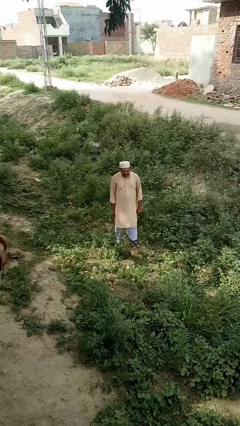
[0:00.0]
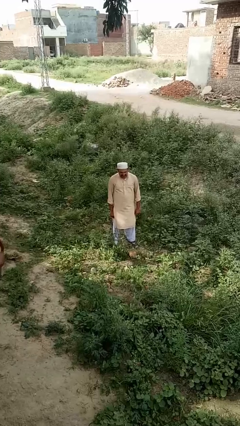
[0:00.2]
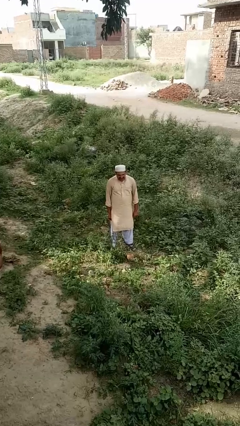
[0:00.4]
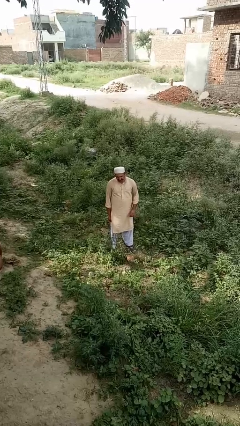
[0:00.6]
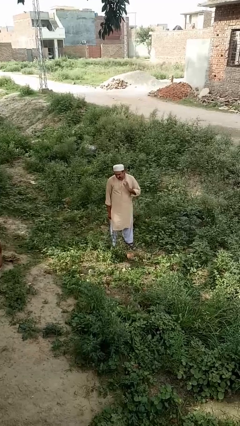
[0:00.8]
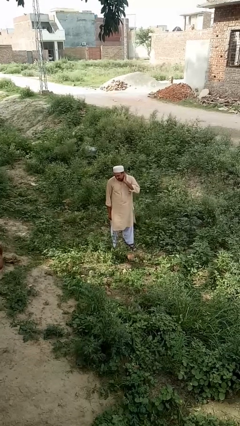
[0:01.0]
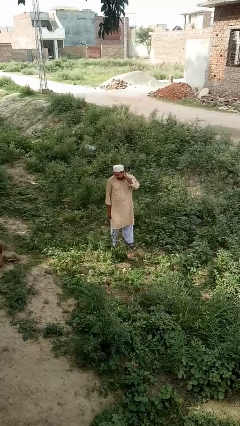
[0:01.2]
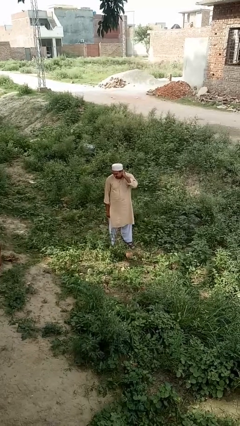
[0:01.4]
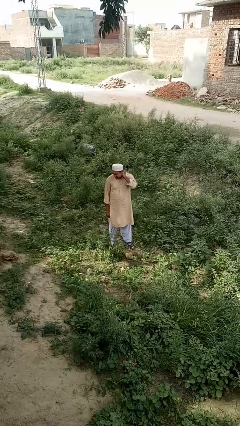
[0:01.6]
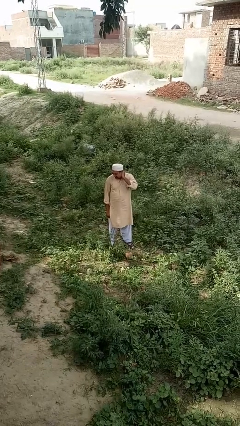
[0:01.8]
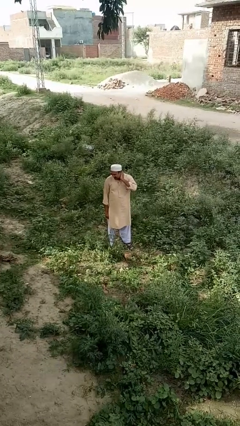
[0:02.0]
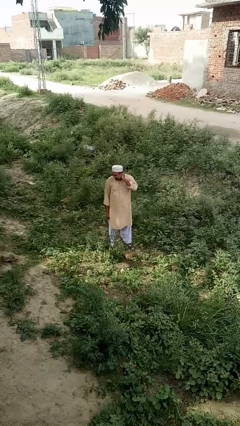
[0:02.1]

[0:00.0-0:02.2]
person rubs neck

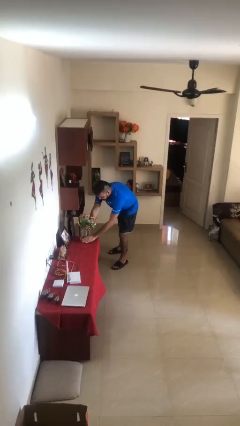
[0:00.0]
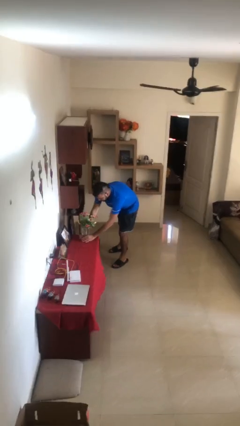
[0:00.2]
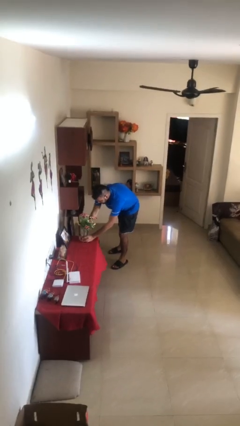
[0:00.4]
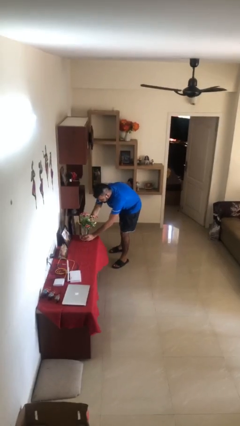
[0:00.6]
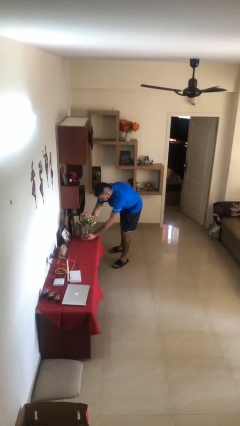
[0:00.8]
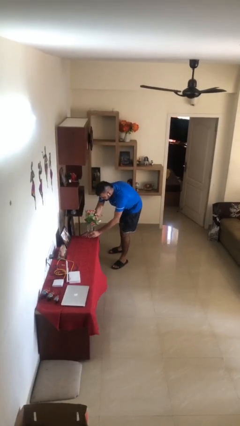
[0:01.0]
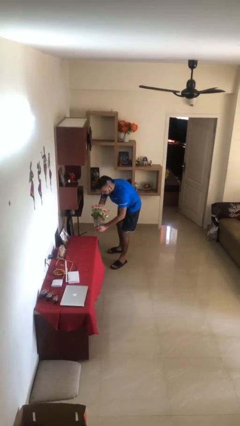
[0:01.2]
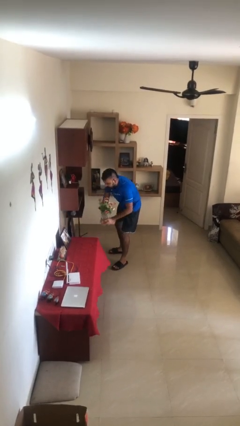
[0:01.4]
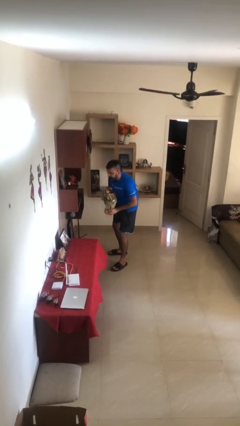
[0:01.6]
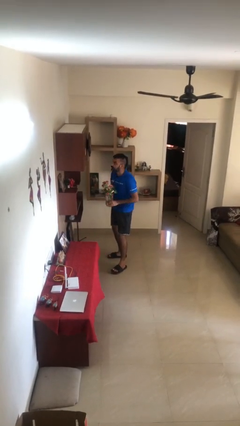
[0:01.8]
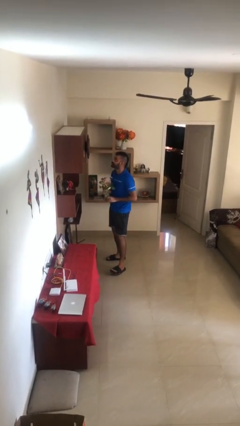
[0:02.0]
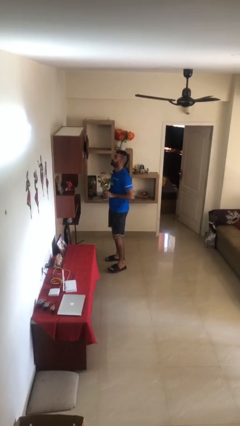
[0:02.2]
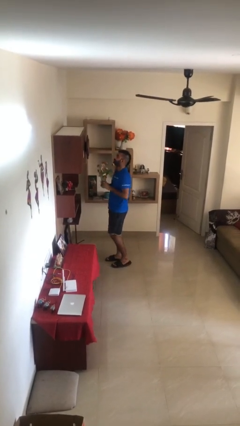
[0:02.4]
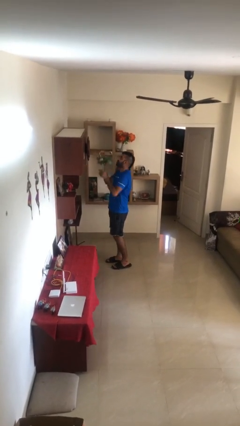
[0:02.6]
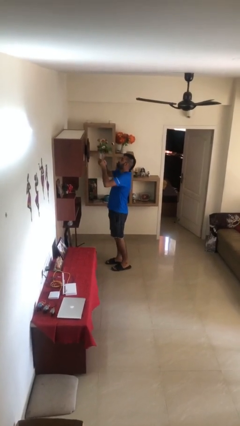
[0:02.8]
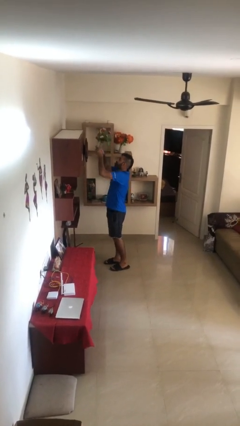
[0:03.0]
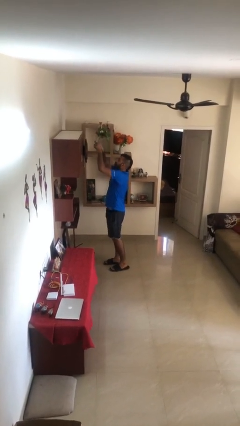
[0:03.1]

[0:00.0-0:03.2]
person picks up object from table

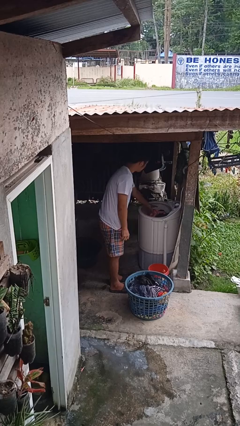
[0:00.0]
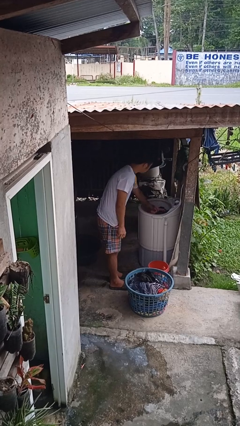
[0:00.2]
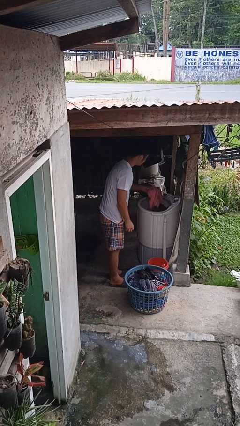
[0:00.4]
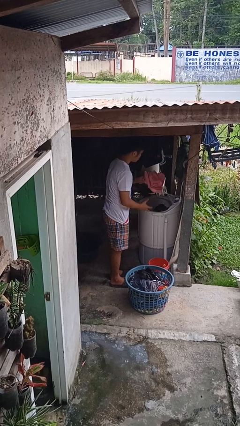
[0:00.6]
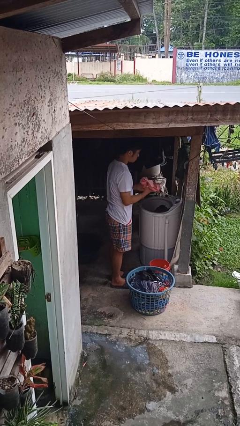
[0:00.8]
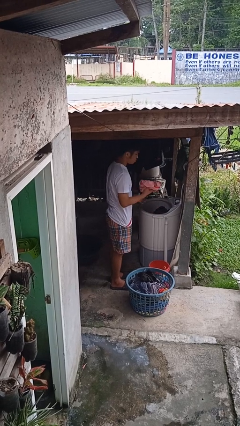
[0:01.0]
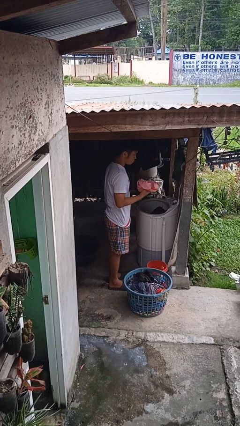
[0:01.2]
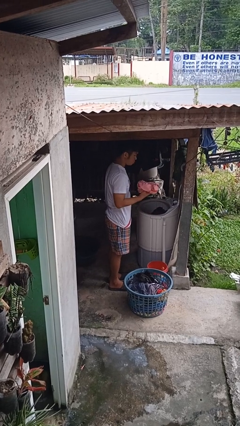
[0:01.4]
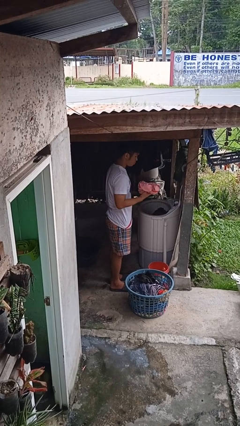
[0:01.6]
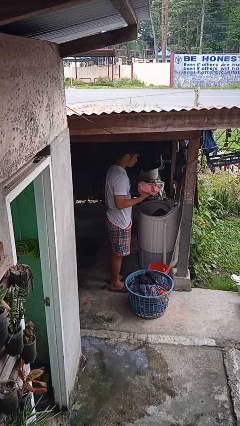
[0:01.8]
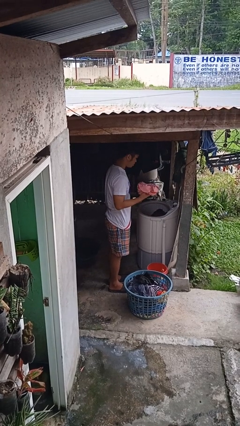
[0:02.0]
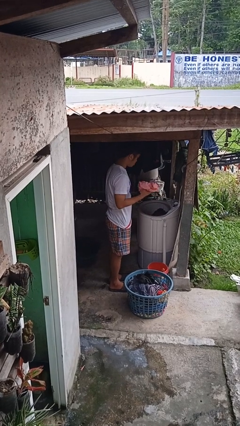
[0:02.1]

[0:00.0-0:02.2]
person unloads clotheswasher

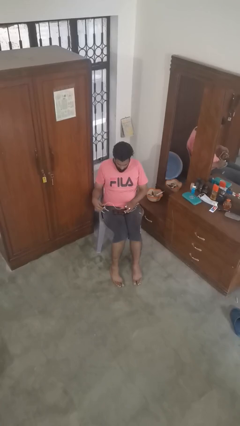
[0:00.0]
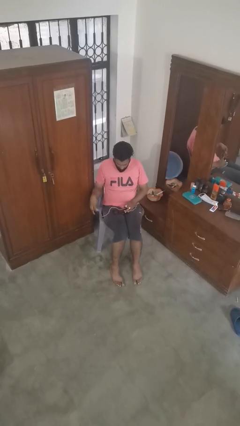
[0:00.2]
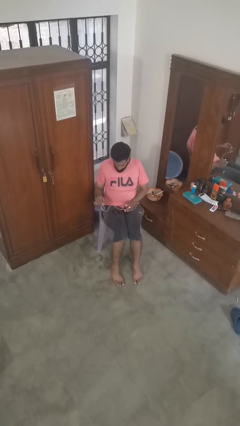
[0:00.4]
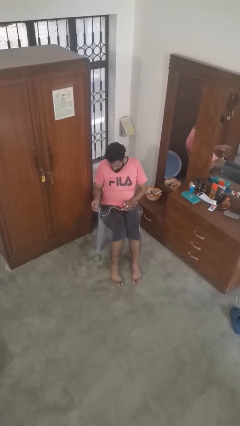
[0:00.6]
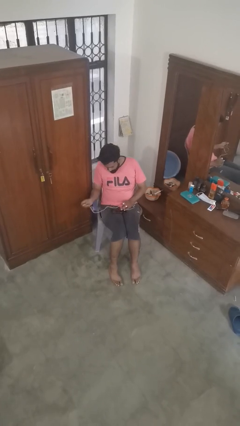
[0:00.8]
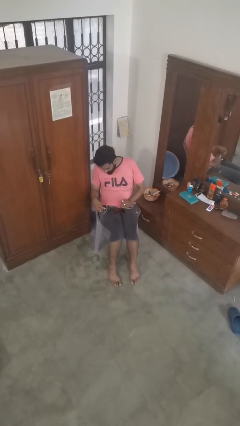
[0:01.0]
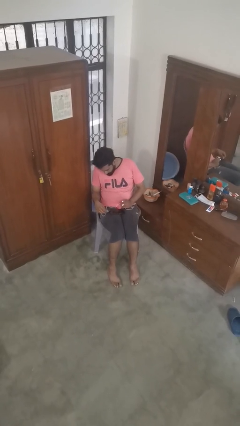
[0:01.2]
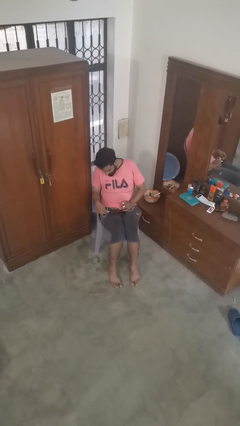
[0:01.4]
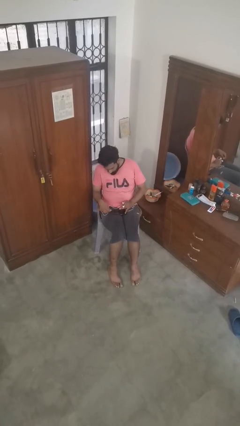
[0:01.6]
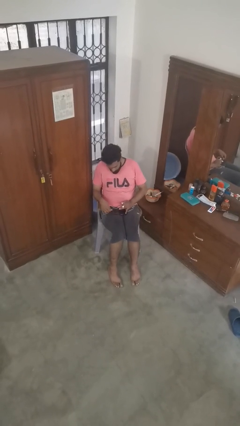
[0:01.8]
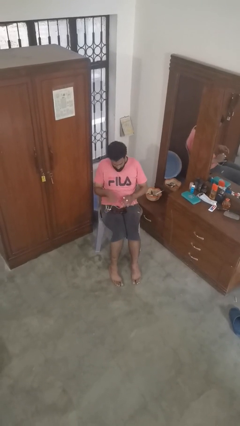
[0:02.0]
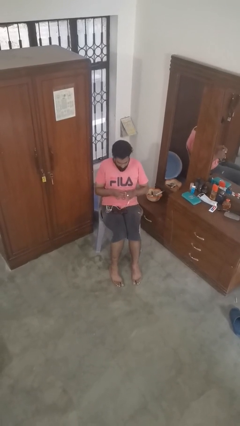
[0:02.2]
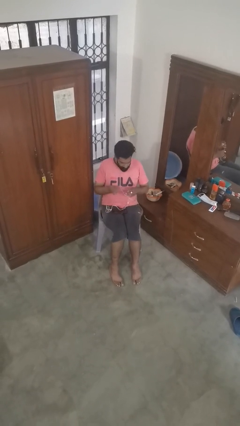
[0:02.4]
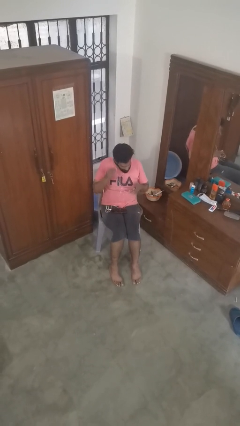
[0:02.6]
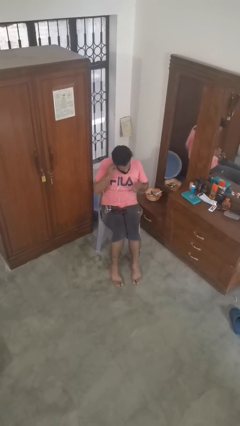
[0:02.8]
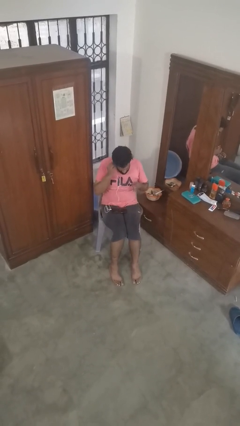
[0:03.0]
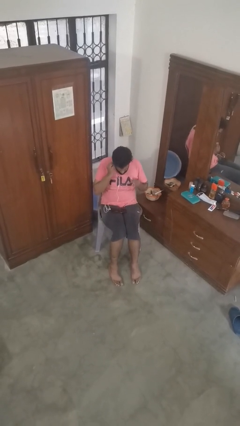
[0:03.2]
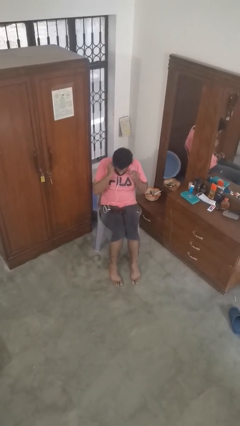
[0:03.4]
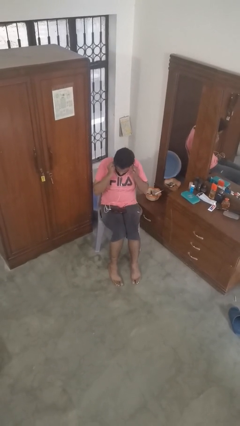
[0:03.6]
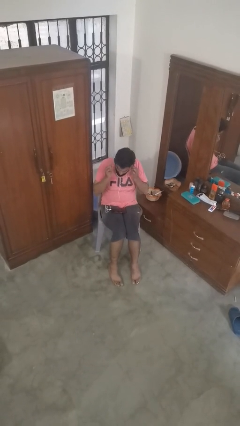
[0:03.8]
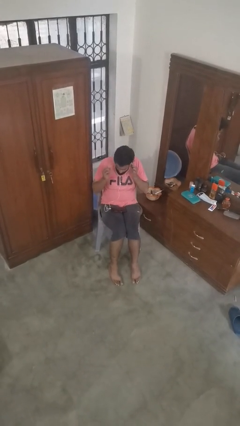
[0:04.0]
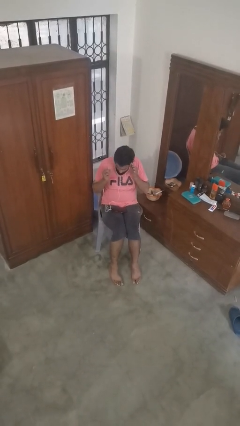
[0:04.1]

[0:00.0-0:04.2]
person puts on headphones

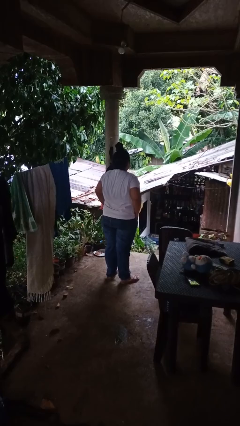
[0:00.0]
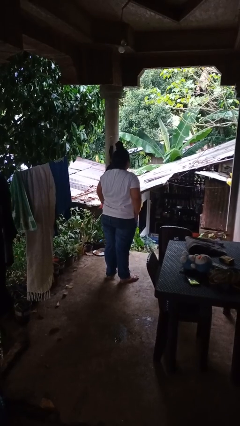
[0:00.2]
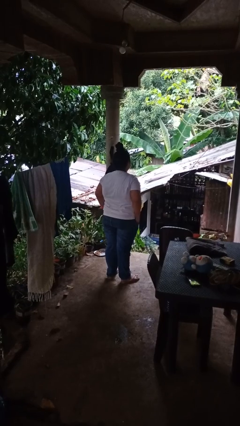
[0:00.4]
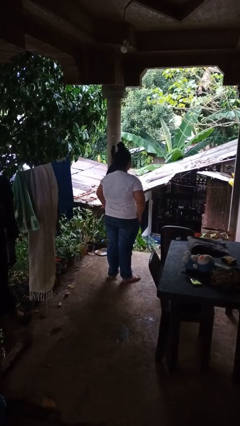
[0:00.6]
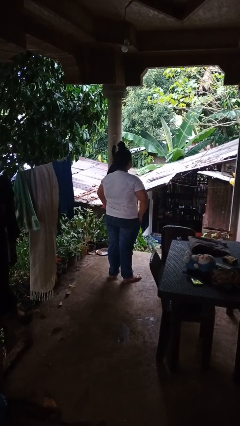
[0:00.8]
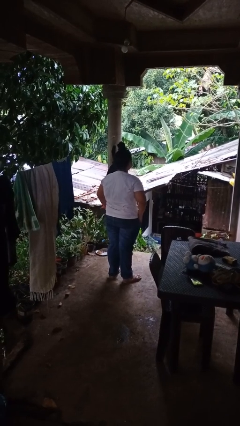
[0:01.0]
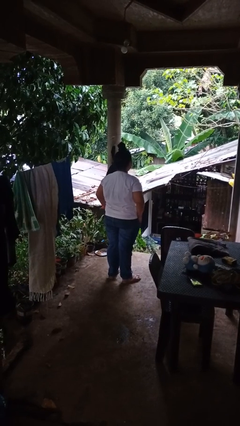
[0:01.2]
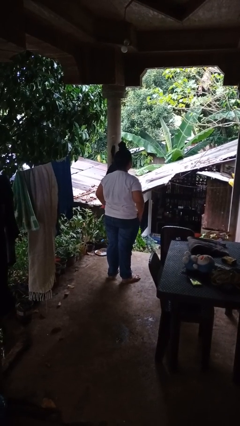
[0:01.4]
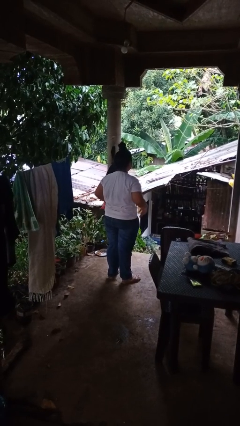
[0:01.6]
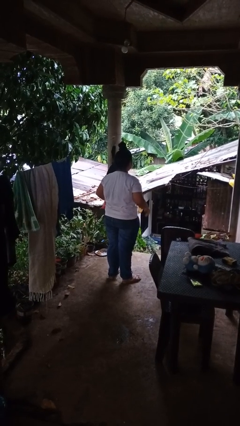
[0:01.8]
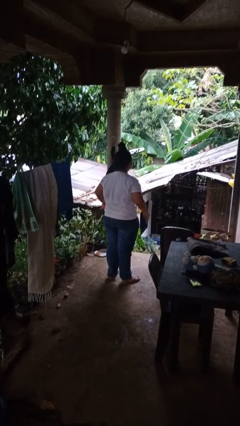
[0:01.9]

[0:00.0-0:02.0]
person puts hands in back pockets

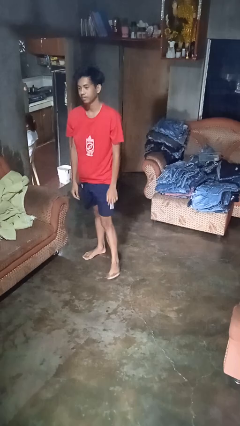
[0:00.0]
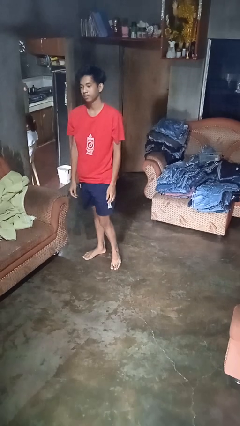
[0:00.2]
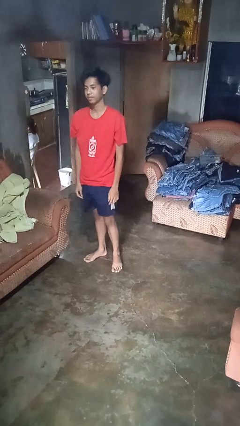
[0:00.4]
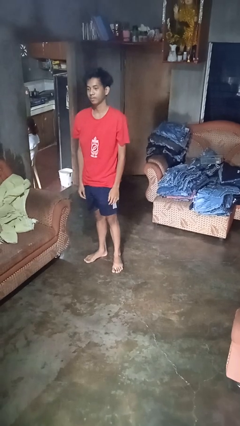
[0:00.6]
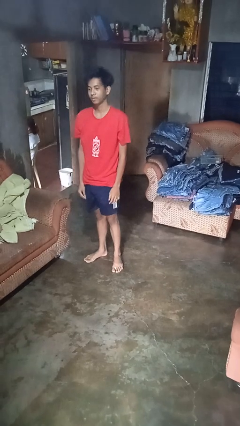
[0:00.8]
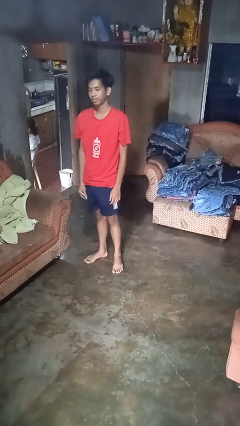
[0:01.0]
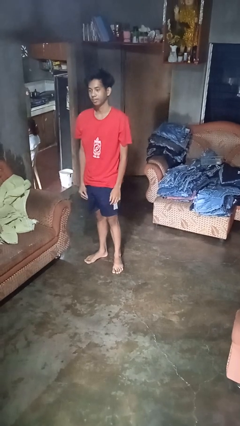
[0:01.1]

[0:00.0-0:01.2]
person stands up from floor

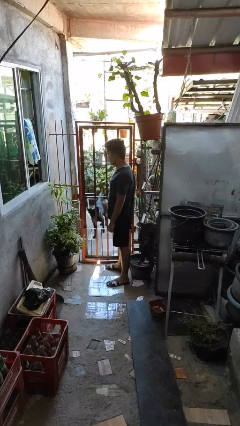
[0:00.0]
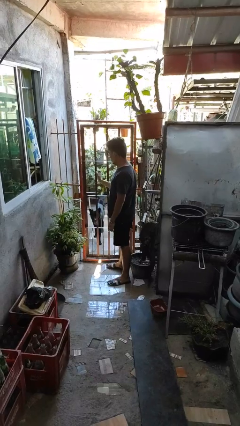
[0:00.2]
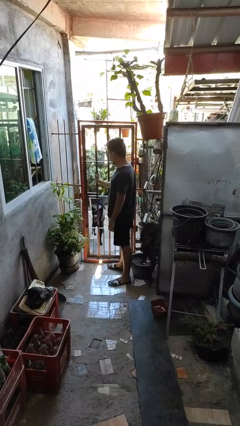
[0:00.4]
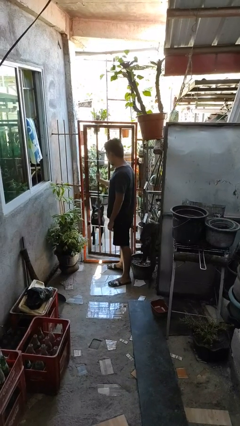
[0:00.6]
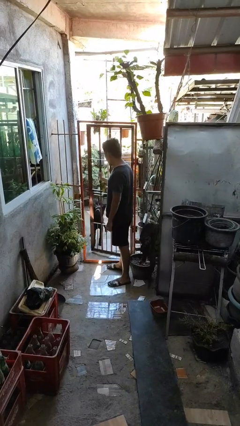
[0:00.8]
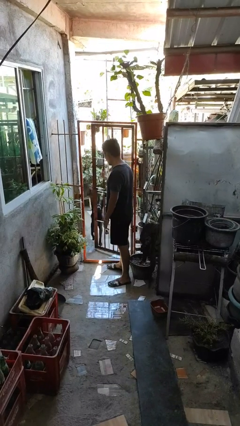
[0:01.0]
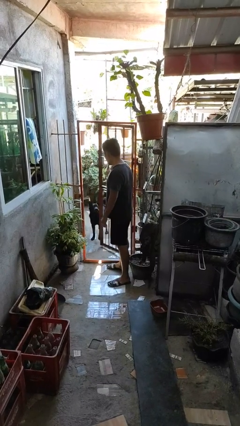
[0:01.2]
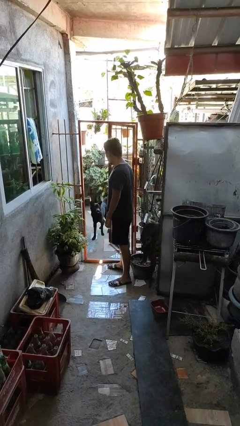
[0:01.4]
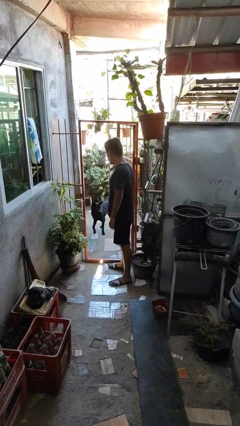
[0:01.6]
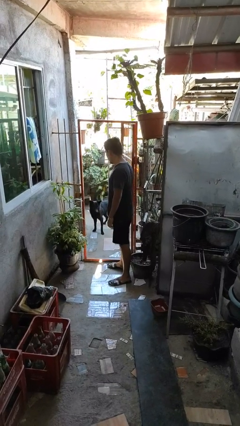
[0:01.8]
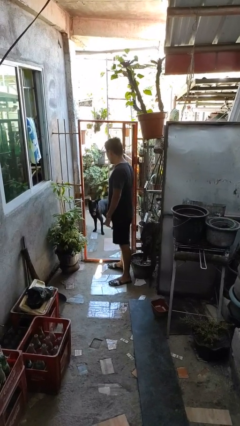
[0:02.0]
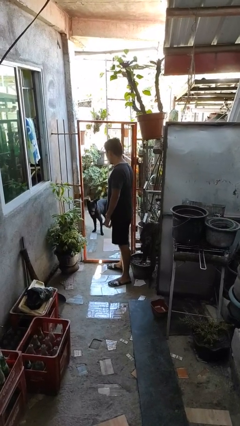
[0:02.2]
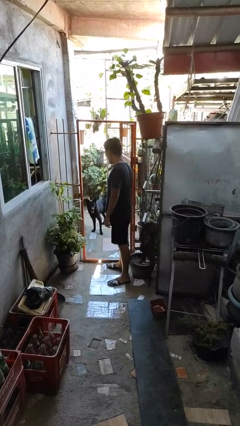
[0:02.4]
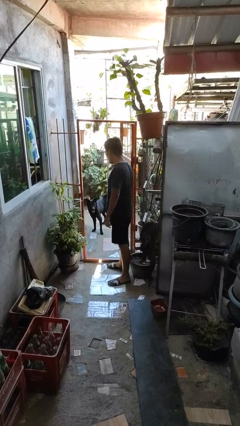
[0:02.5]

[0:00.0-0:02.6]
person opens gate
